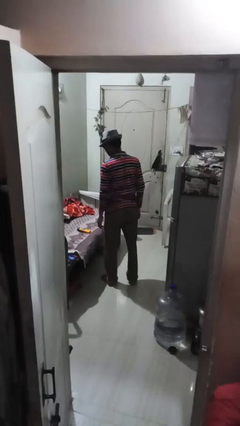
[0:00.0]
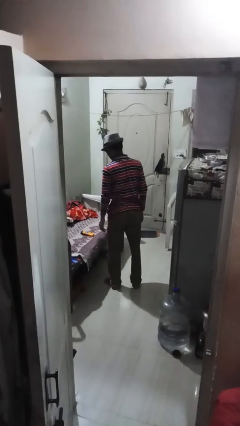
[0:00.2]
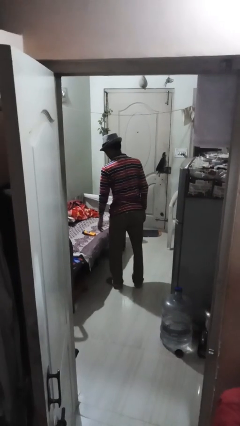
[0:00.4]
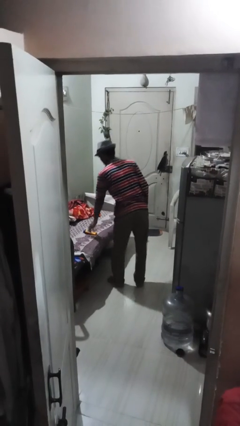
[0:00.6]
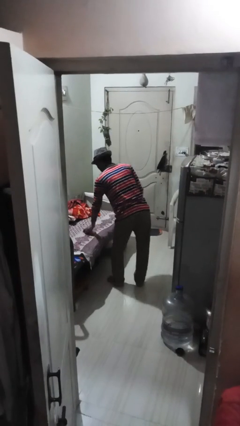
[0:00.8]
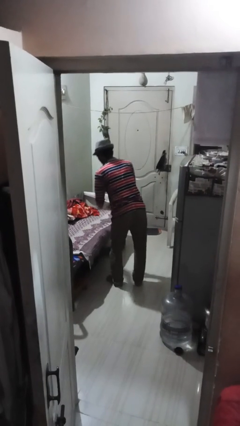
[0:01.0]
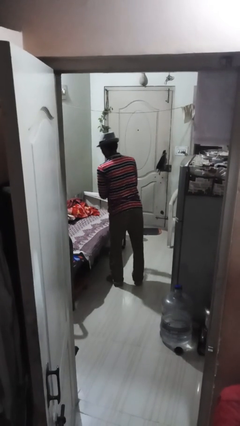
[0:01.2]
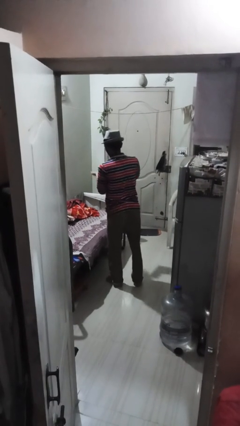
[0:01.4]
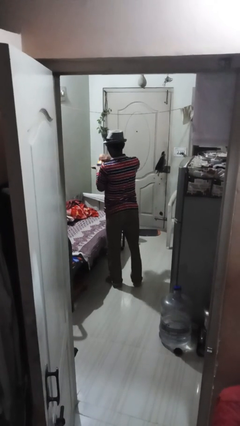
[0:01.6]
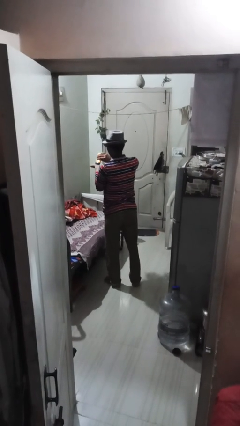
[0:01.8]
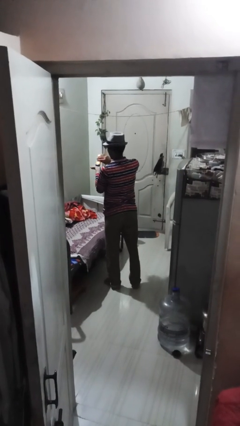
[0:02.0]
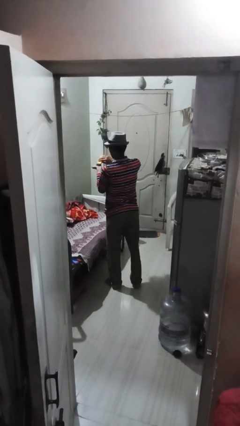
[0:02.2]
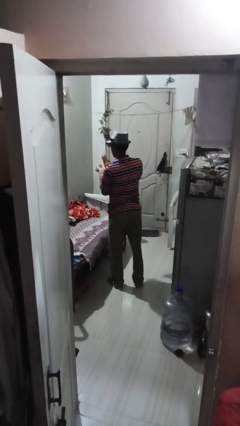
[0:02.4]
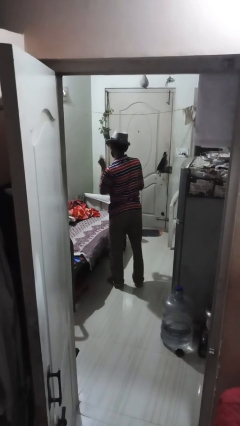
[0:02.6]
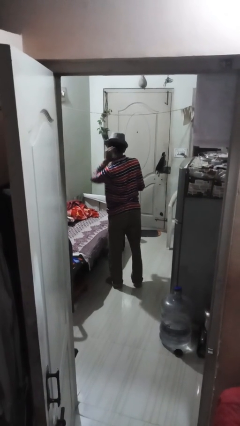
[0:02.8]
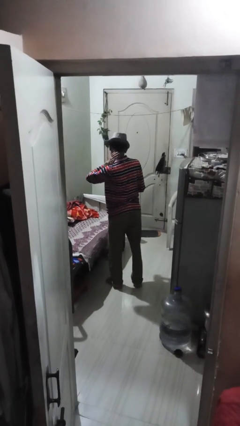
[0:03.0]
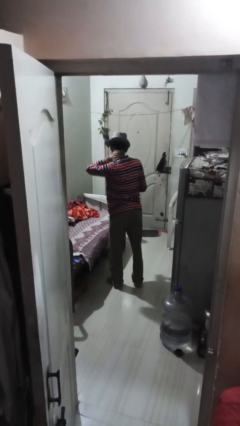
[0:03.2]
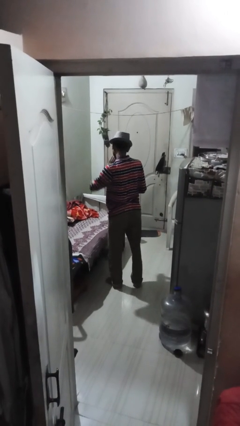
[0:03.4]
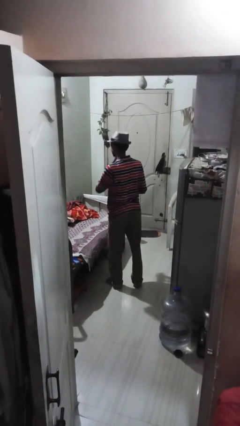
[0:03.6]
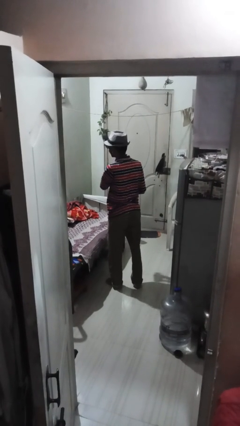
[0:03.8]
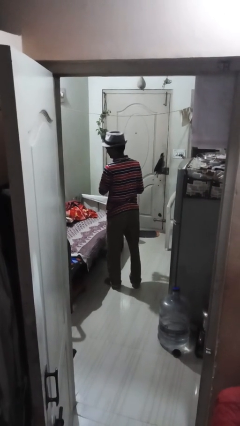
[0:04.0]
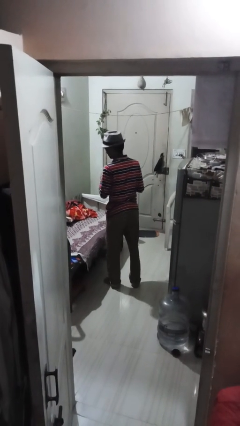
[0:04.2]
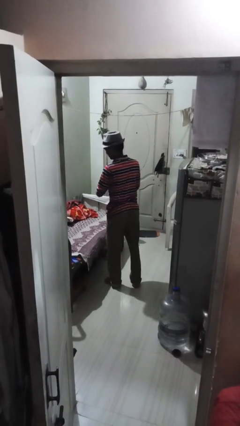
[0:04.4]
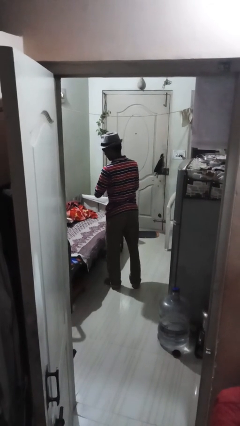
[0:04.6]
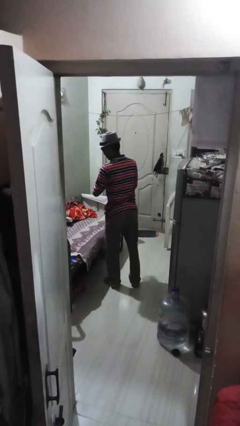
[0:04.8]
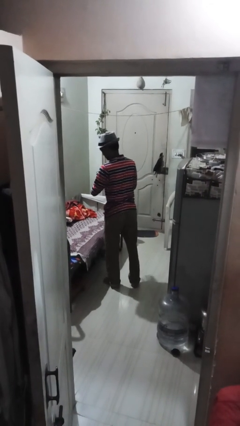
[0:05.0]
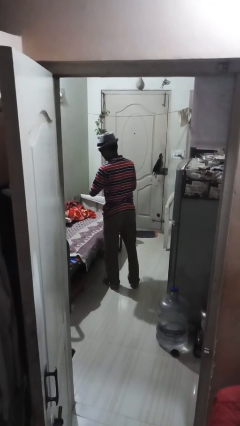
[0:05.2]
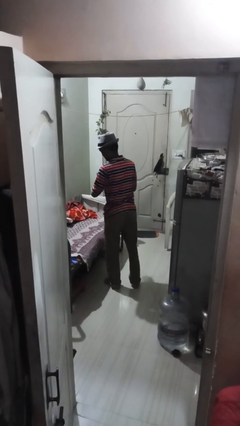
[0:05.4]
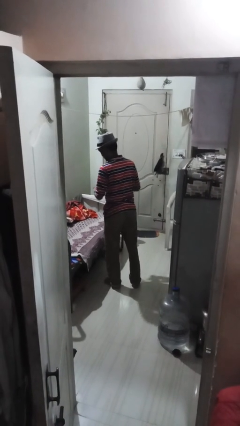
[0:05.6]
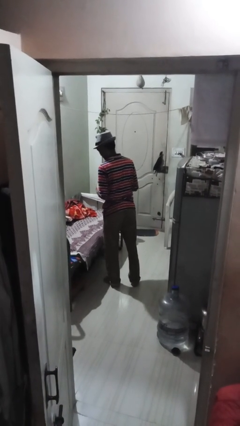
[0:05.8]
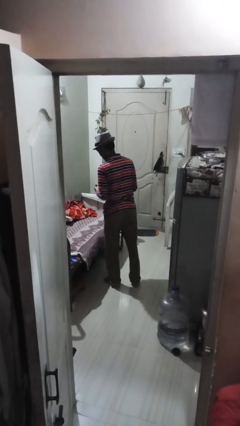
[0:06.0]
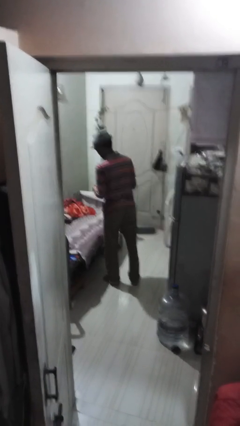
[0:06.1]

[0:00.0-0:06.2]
person applies sunscreen

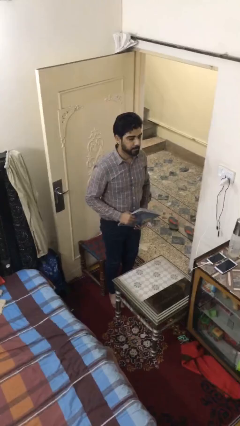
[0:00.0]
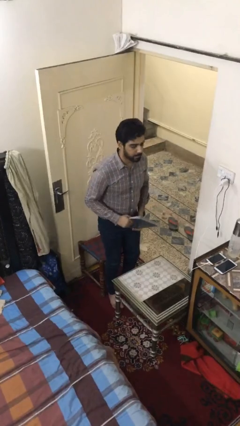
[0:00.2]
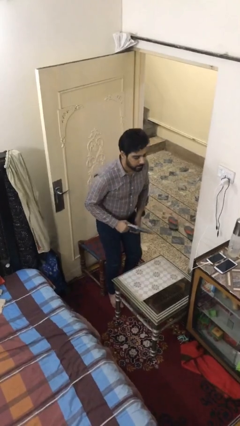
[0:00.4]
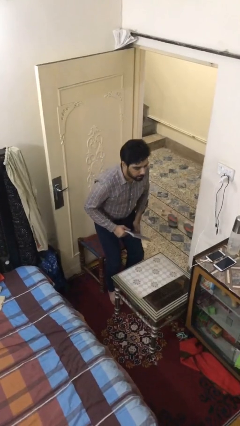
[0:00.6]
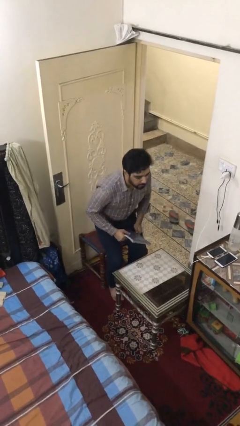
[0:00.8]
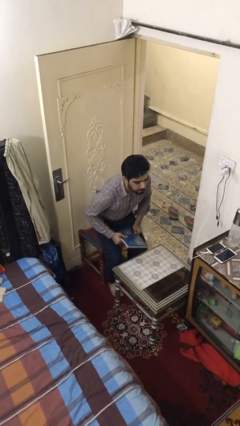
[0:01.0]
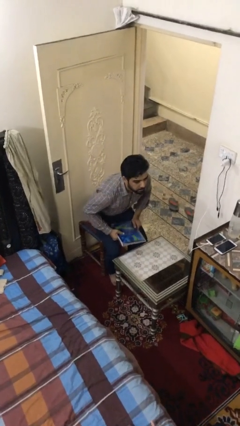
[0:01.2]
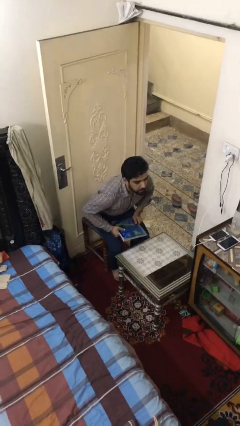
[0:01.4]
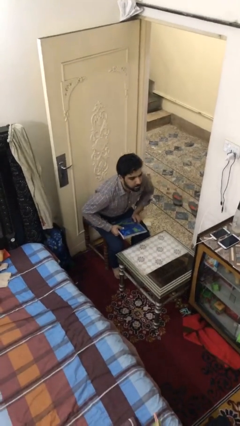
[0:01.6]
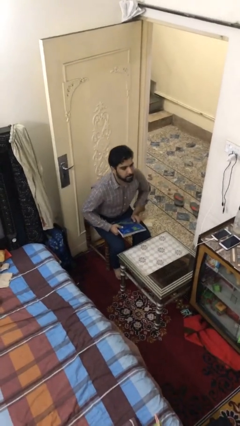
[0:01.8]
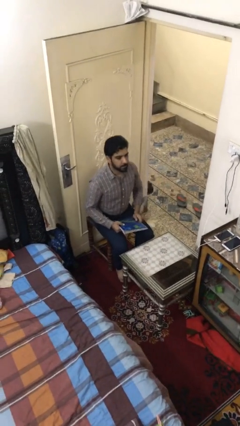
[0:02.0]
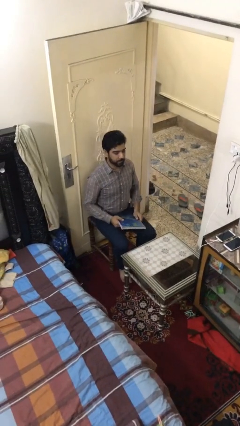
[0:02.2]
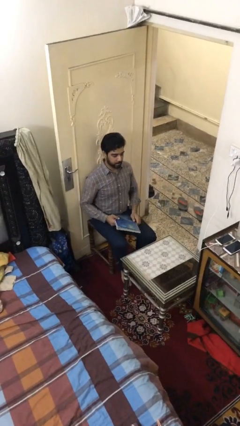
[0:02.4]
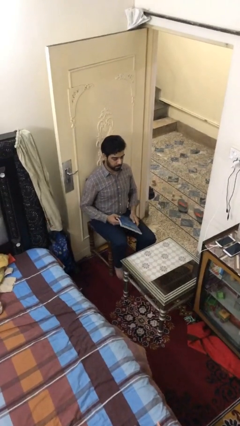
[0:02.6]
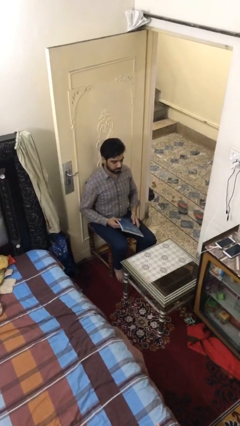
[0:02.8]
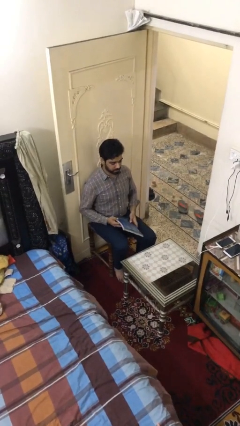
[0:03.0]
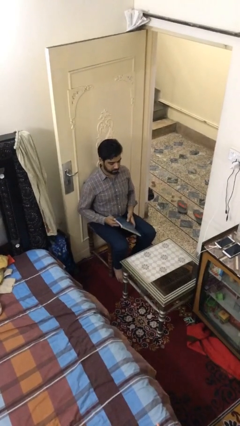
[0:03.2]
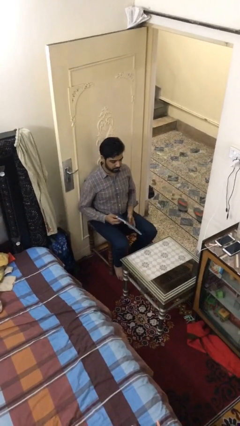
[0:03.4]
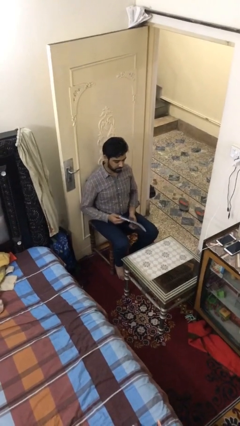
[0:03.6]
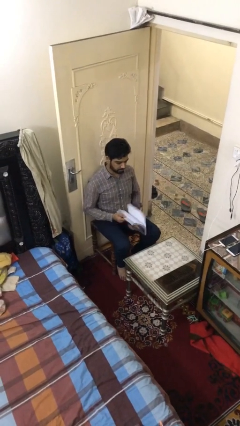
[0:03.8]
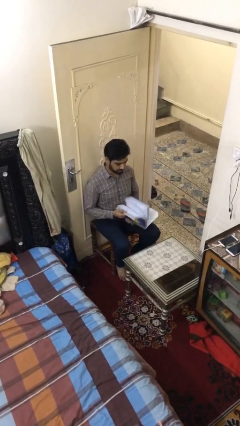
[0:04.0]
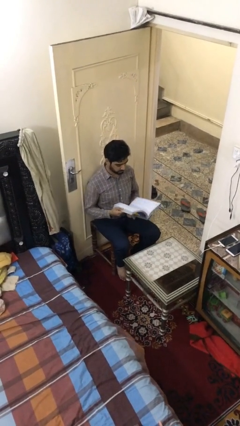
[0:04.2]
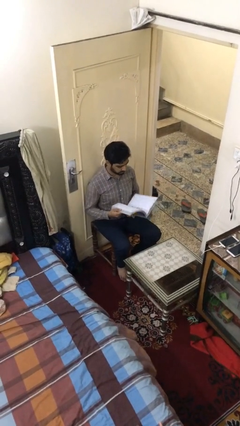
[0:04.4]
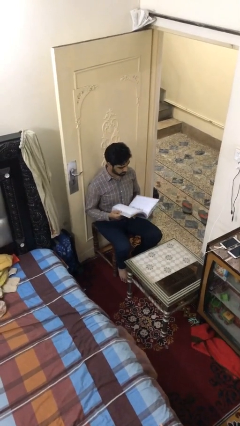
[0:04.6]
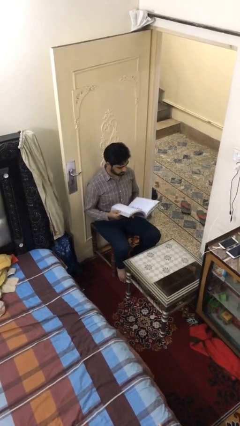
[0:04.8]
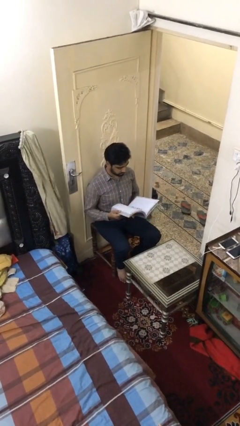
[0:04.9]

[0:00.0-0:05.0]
person sits down

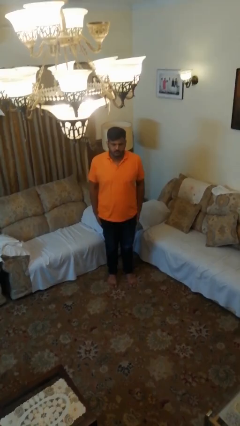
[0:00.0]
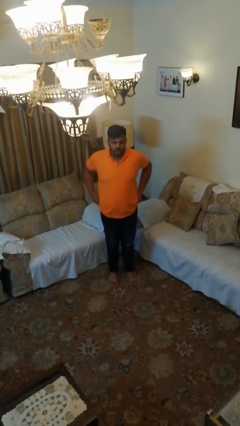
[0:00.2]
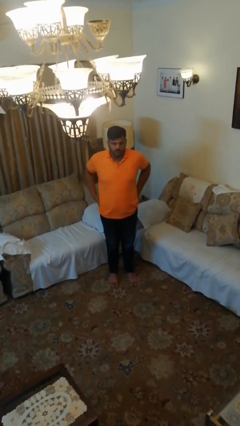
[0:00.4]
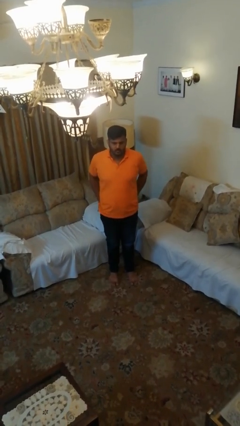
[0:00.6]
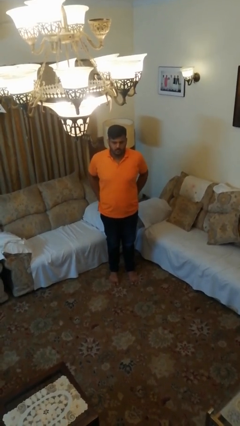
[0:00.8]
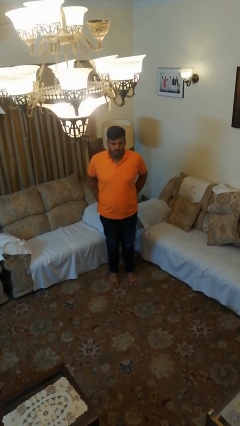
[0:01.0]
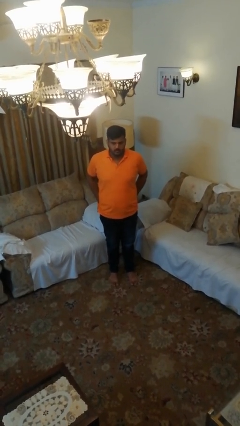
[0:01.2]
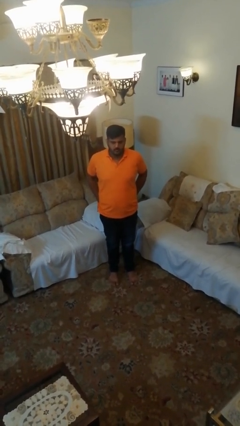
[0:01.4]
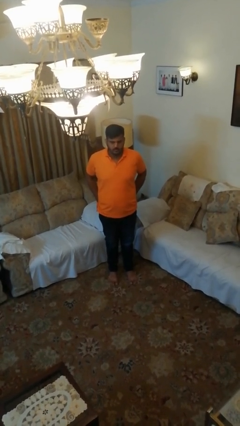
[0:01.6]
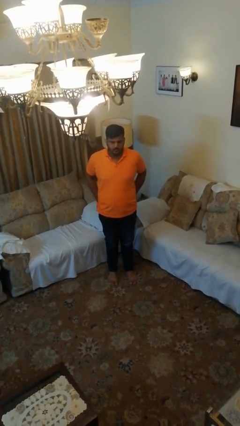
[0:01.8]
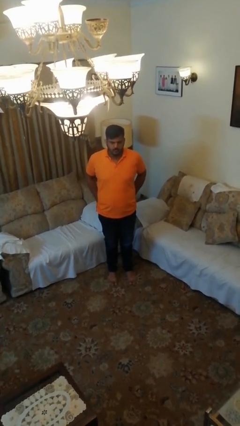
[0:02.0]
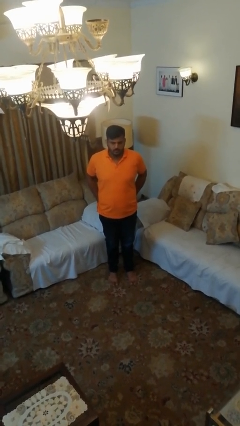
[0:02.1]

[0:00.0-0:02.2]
person puts hands in back pockets

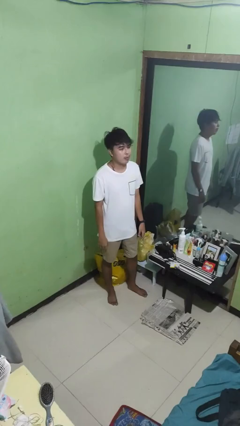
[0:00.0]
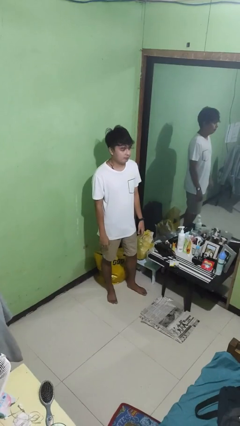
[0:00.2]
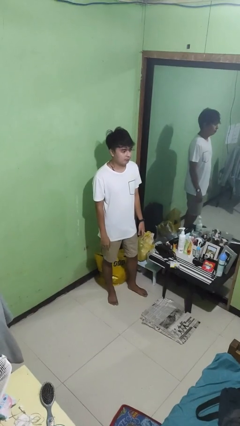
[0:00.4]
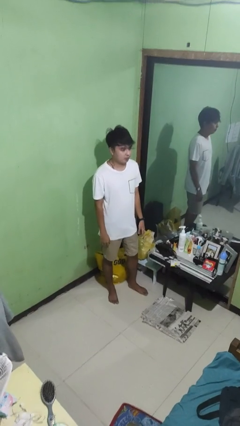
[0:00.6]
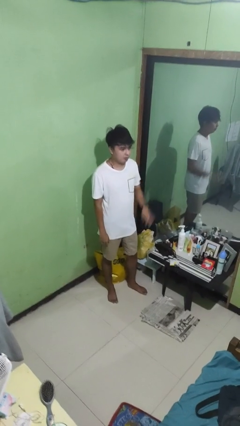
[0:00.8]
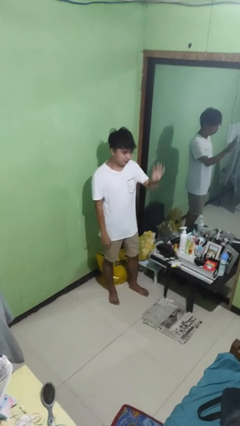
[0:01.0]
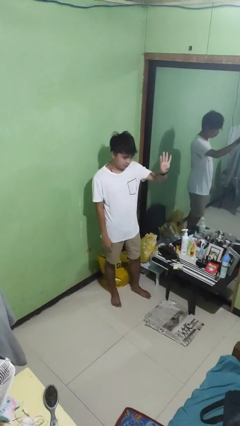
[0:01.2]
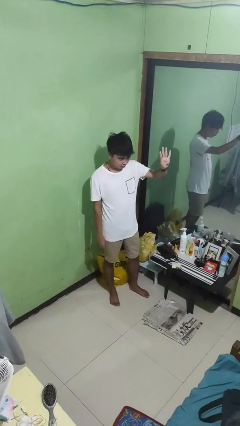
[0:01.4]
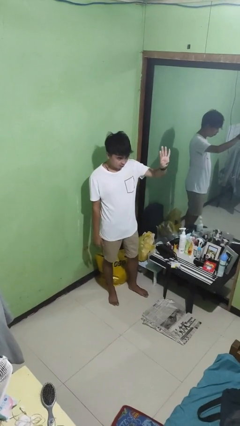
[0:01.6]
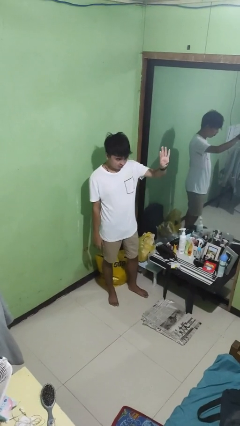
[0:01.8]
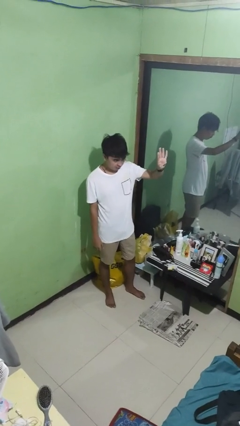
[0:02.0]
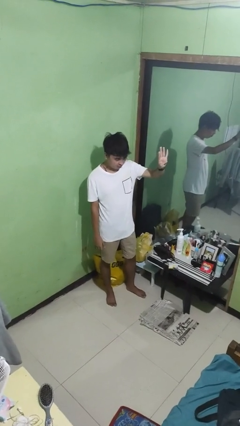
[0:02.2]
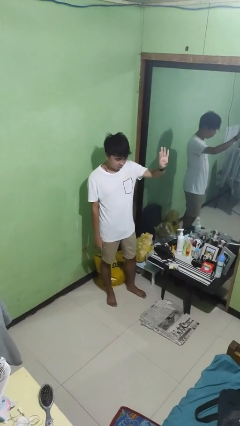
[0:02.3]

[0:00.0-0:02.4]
person gestures number four

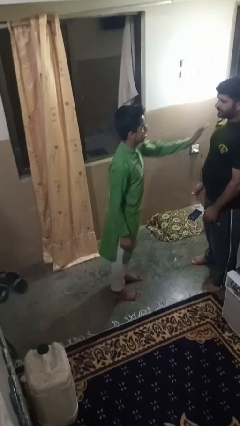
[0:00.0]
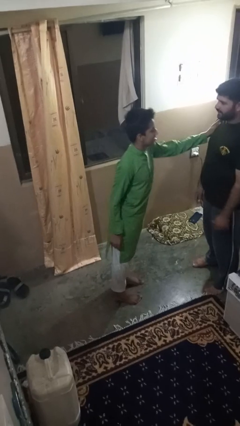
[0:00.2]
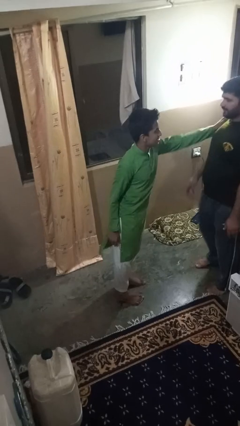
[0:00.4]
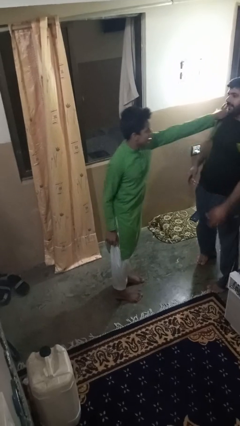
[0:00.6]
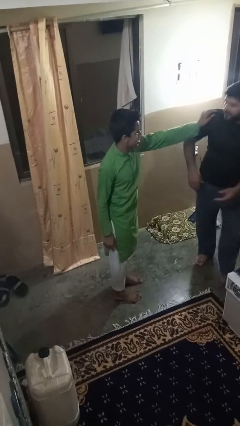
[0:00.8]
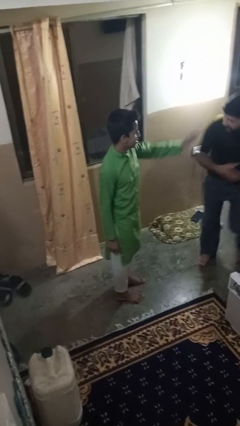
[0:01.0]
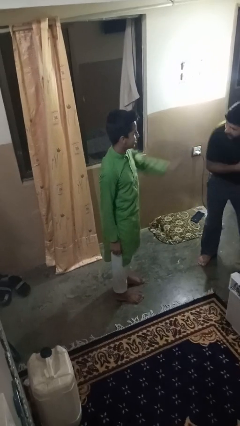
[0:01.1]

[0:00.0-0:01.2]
person shoves person

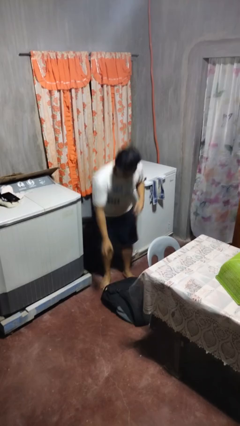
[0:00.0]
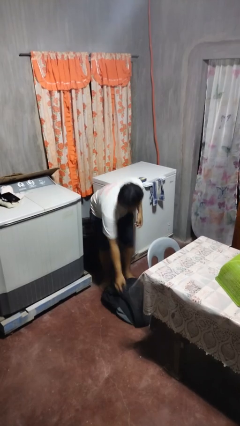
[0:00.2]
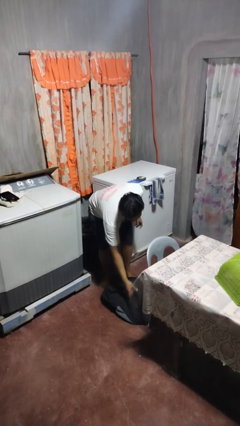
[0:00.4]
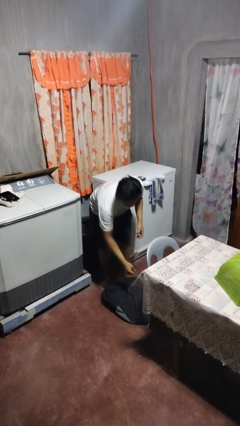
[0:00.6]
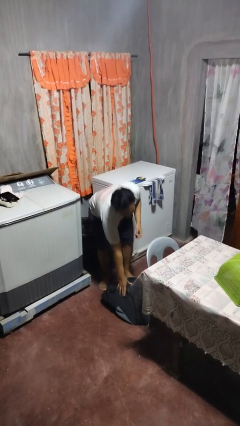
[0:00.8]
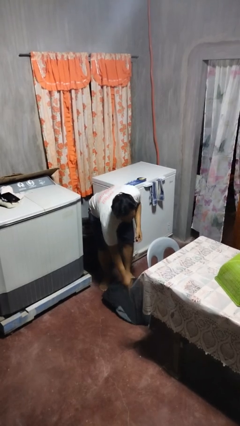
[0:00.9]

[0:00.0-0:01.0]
person picks up object from floor
